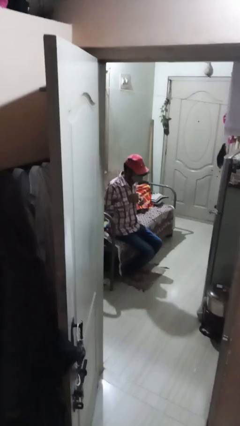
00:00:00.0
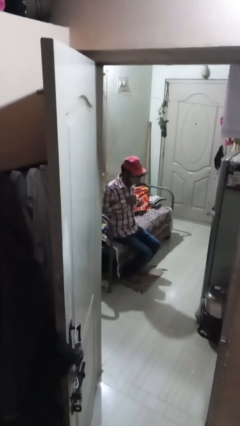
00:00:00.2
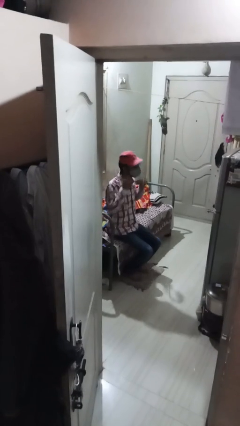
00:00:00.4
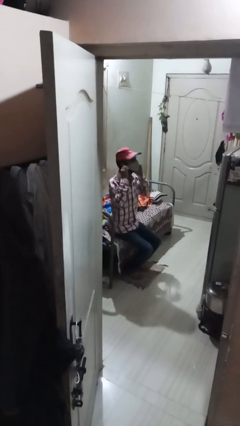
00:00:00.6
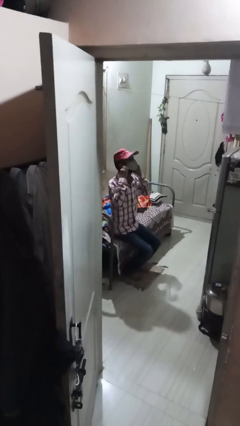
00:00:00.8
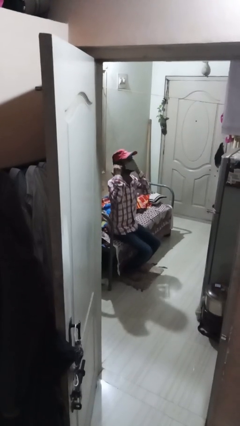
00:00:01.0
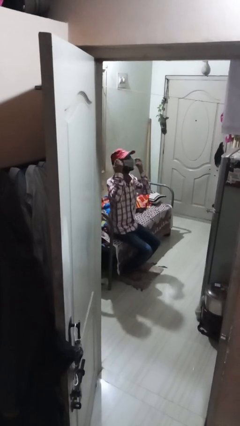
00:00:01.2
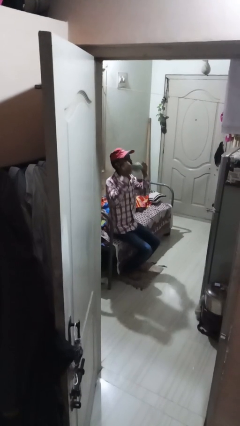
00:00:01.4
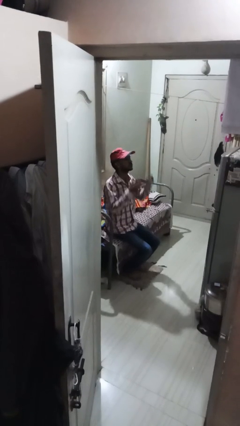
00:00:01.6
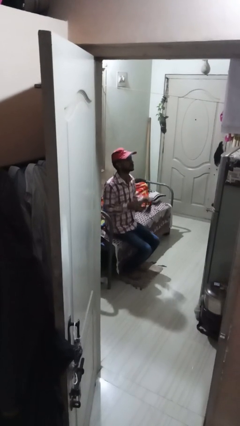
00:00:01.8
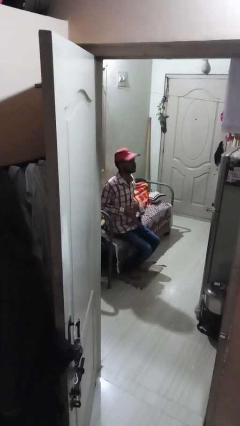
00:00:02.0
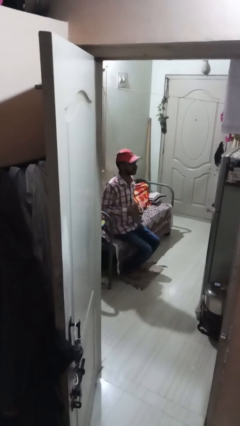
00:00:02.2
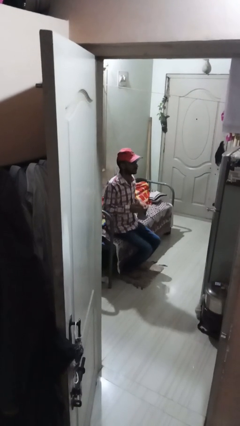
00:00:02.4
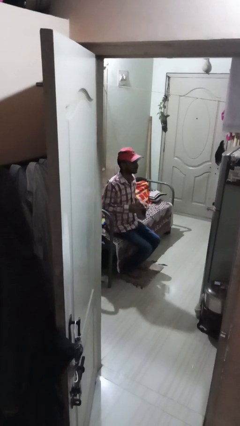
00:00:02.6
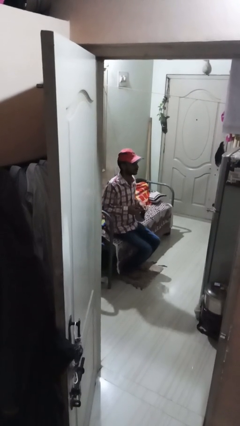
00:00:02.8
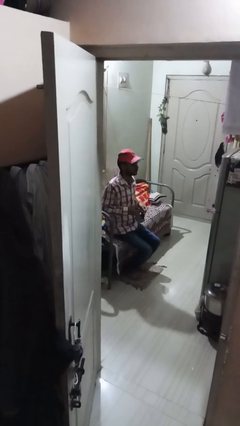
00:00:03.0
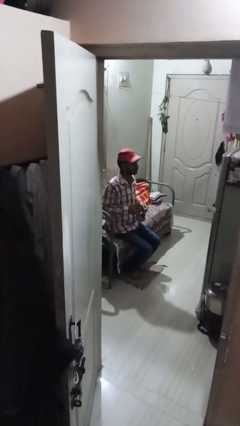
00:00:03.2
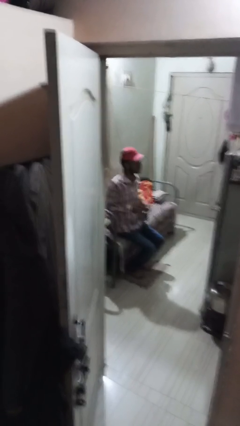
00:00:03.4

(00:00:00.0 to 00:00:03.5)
person takes off facemask

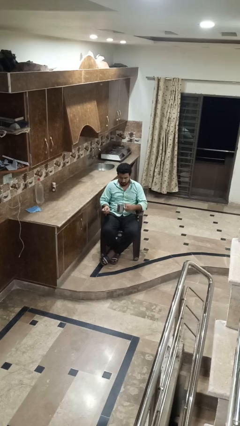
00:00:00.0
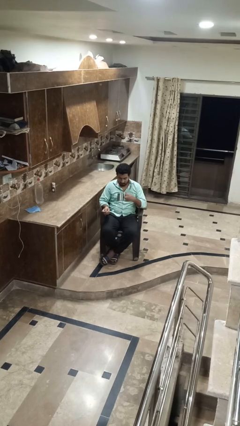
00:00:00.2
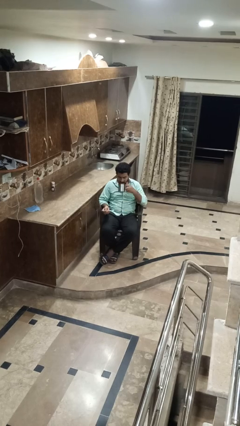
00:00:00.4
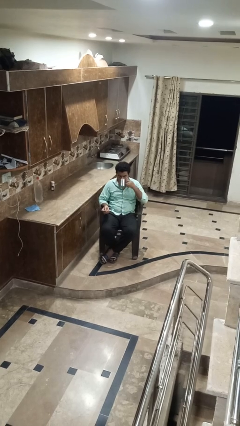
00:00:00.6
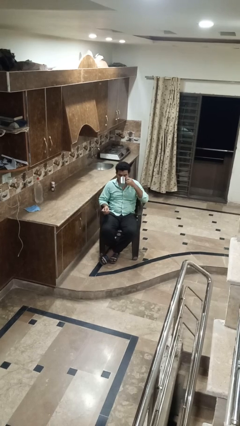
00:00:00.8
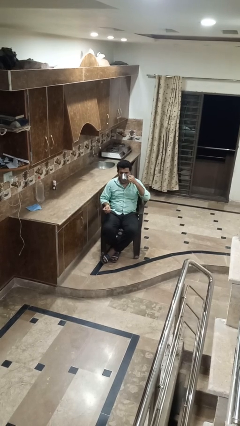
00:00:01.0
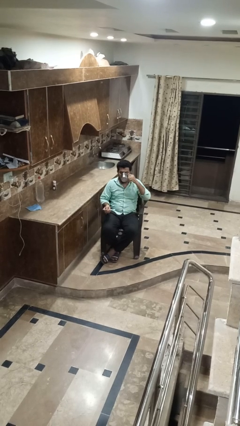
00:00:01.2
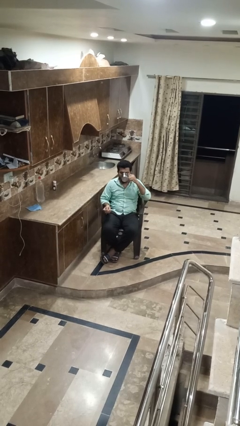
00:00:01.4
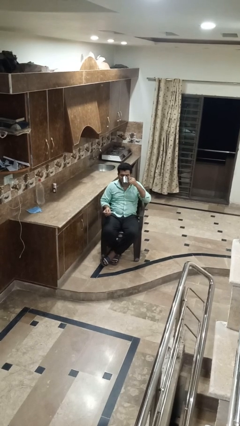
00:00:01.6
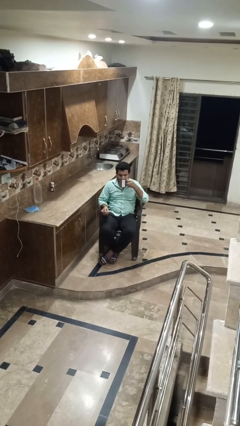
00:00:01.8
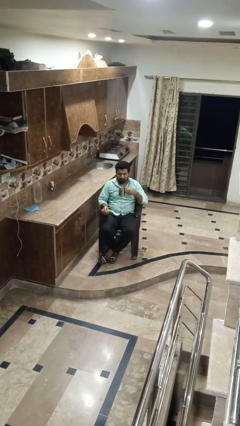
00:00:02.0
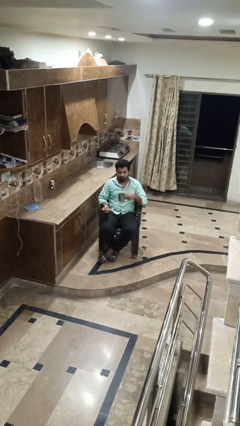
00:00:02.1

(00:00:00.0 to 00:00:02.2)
person drinks from mug

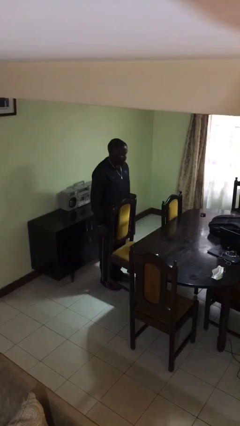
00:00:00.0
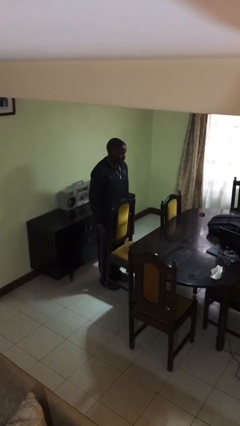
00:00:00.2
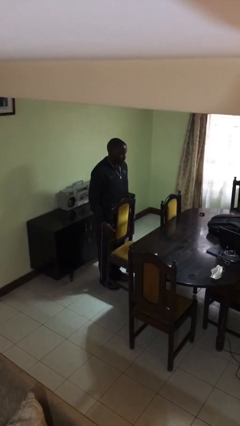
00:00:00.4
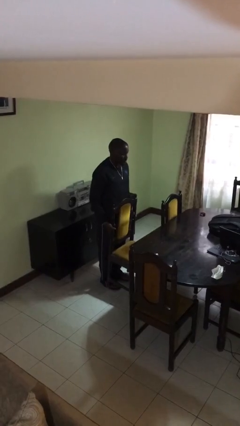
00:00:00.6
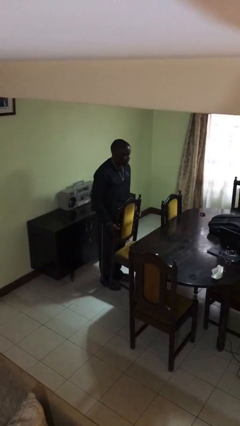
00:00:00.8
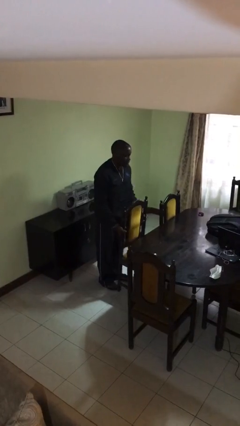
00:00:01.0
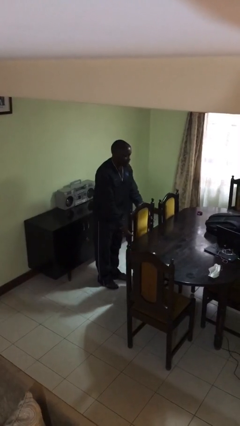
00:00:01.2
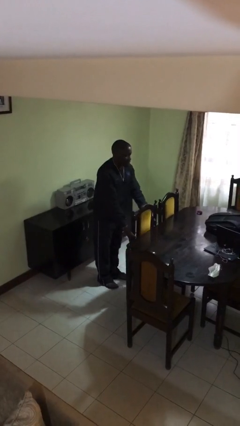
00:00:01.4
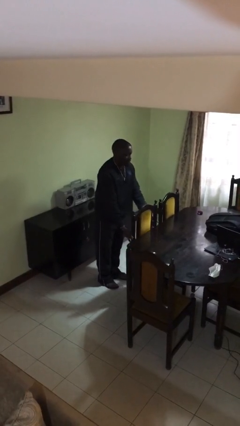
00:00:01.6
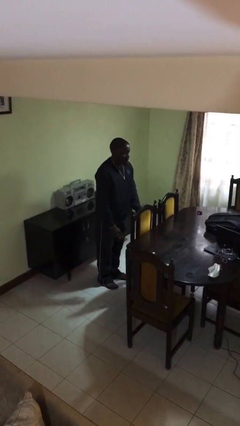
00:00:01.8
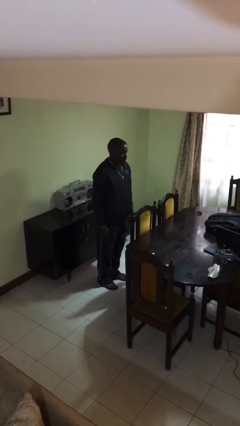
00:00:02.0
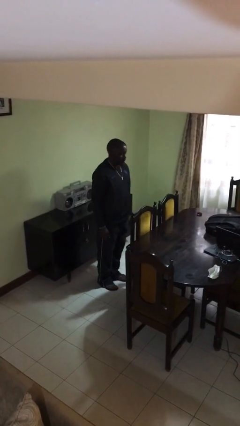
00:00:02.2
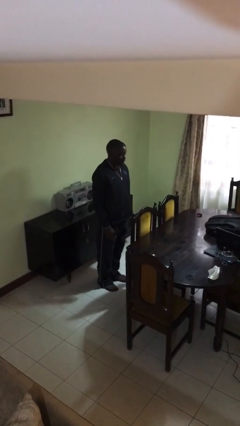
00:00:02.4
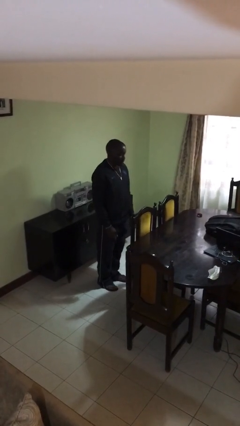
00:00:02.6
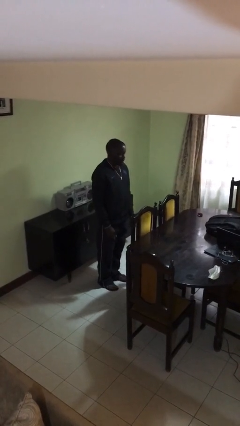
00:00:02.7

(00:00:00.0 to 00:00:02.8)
person pushes in chair

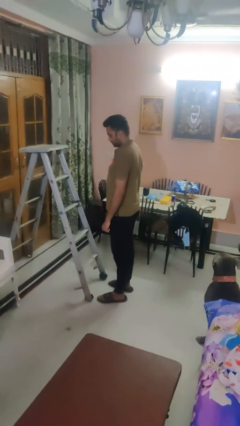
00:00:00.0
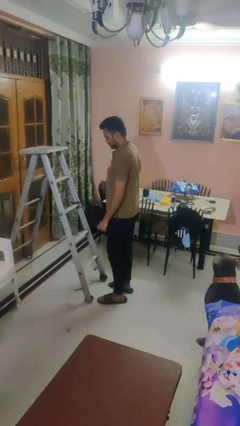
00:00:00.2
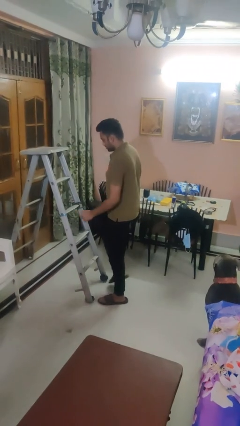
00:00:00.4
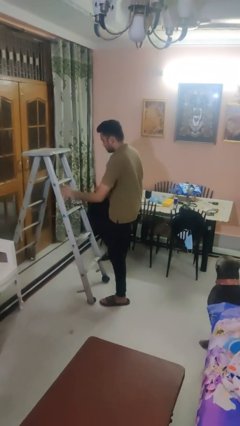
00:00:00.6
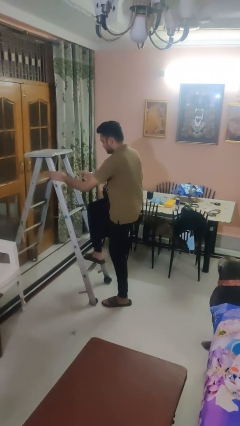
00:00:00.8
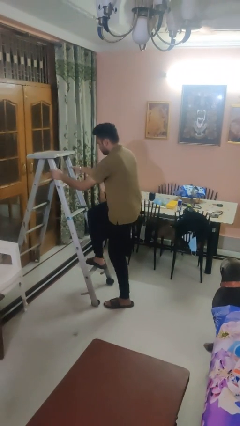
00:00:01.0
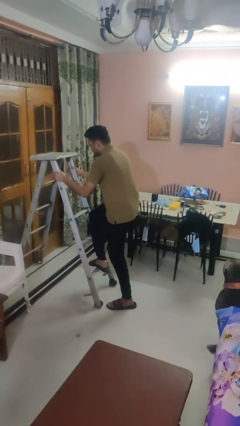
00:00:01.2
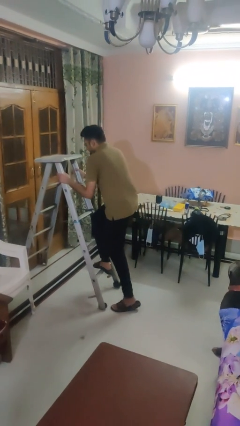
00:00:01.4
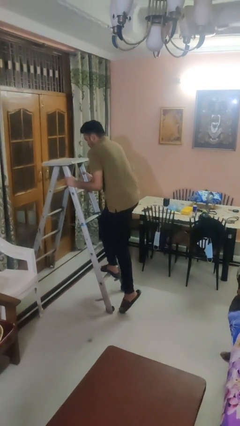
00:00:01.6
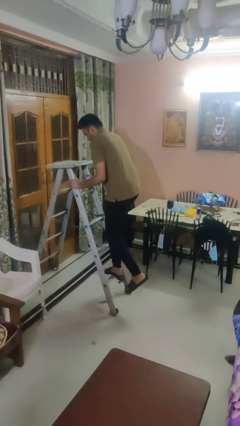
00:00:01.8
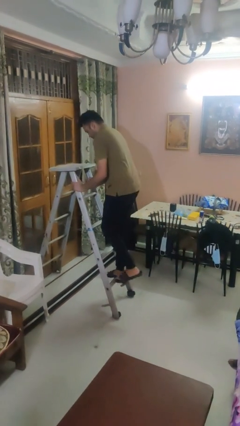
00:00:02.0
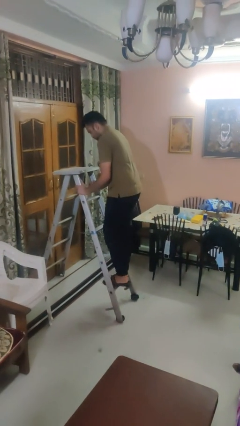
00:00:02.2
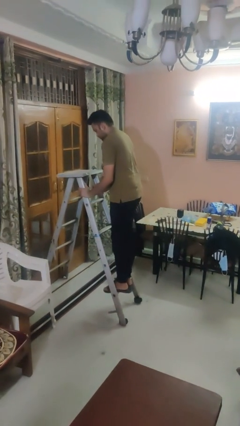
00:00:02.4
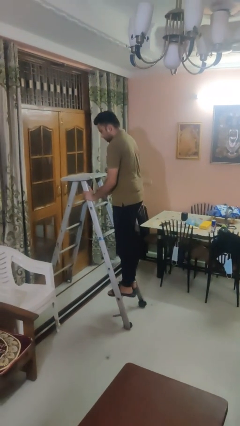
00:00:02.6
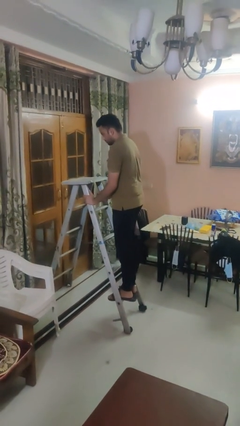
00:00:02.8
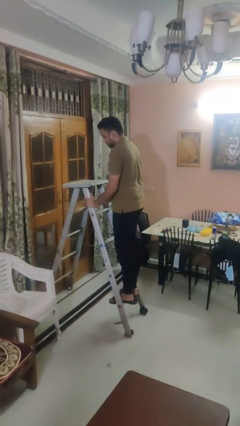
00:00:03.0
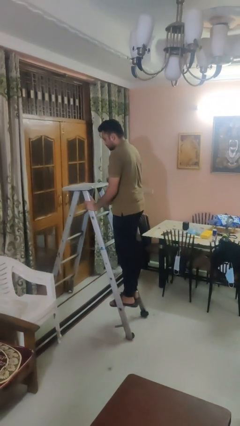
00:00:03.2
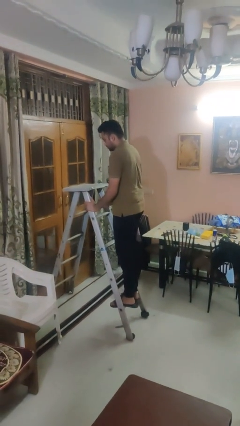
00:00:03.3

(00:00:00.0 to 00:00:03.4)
person climbs up ladder

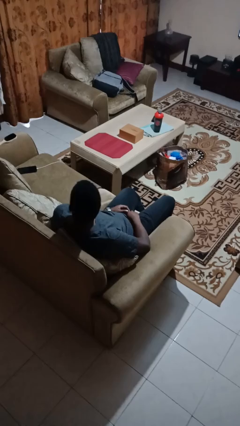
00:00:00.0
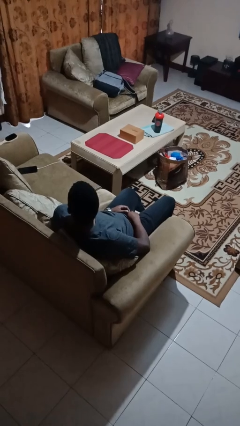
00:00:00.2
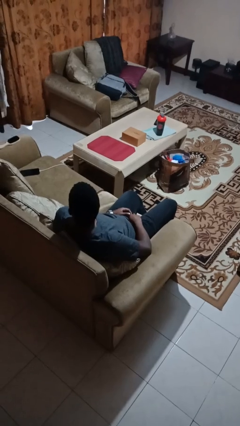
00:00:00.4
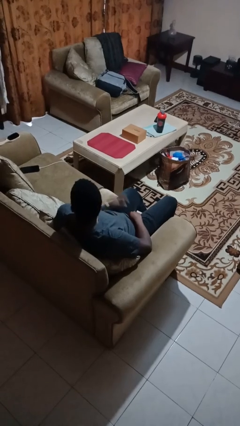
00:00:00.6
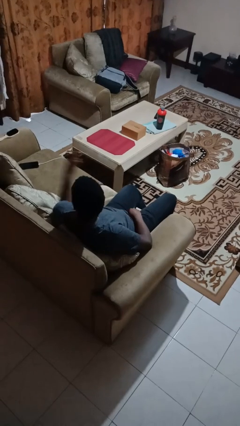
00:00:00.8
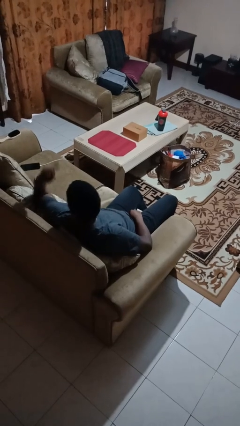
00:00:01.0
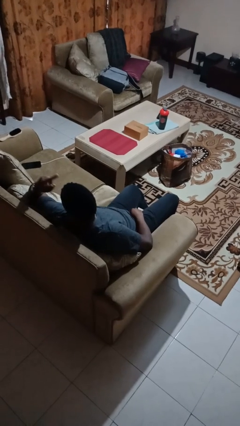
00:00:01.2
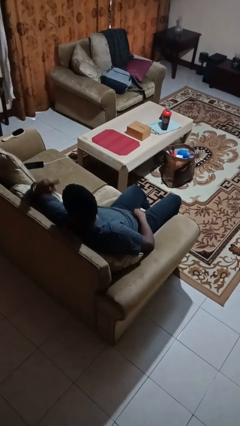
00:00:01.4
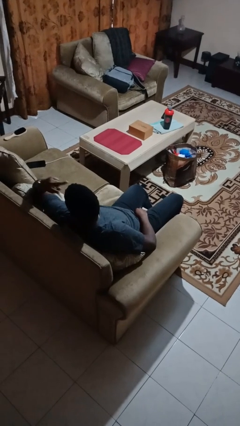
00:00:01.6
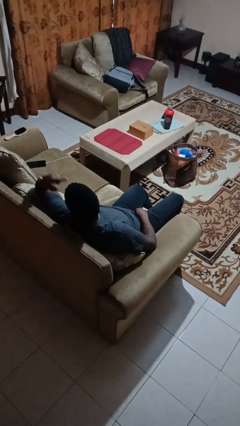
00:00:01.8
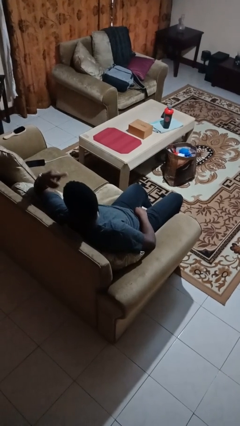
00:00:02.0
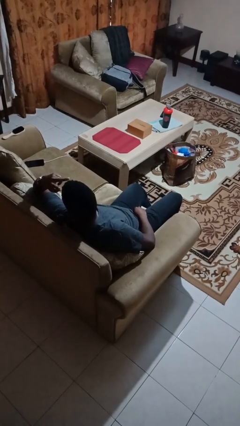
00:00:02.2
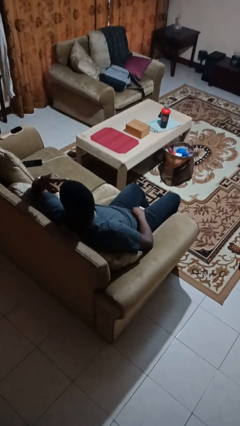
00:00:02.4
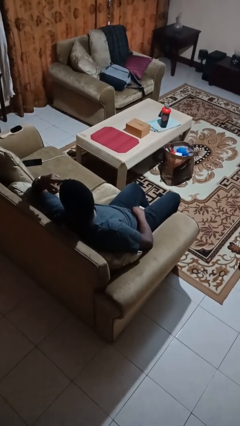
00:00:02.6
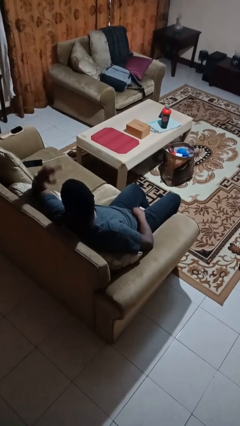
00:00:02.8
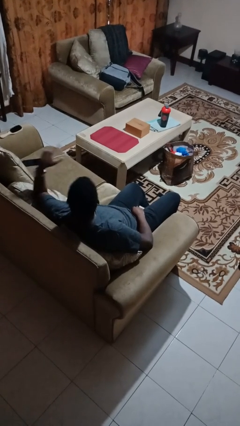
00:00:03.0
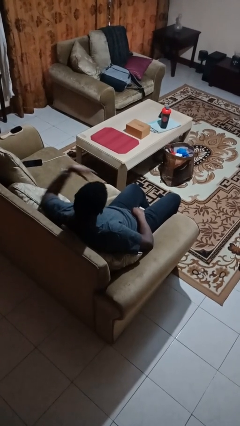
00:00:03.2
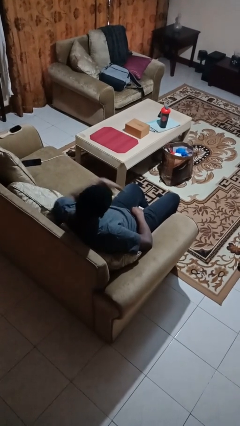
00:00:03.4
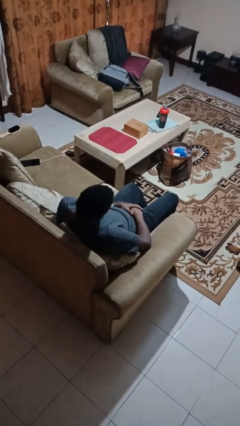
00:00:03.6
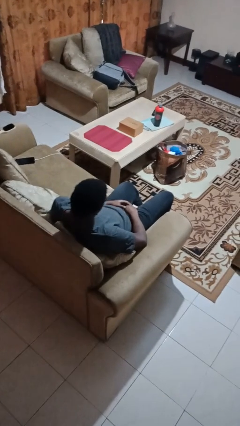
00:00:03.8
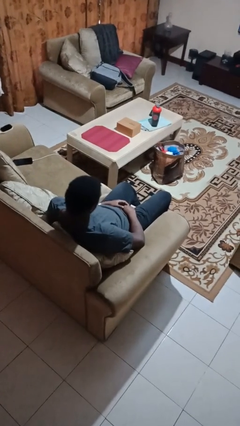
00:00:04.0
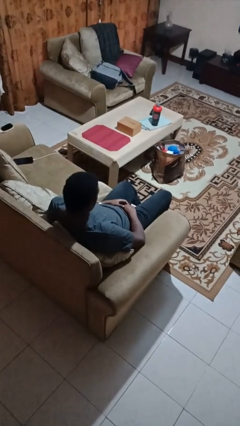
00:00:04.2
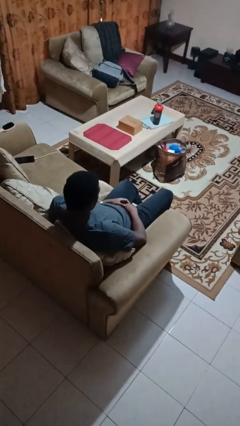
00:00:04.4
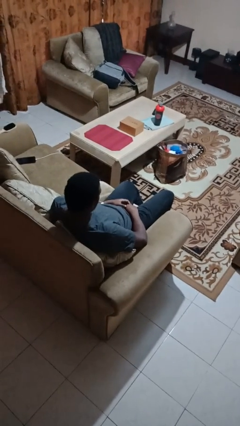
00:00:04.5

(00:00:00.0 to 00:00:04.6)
person gestures watch closely

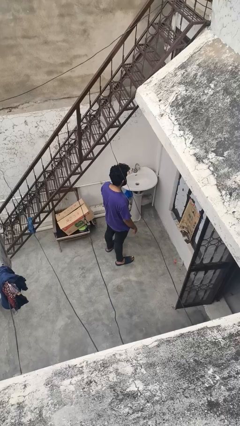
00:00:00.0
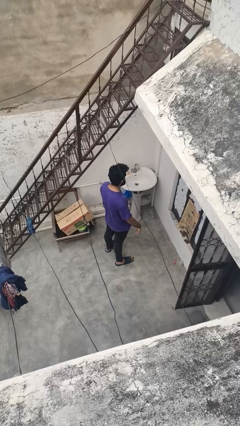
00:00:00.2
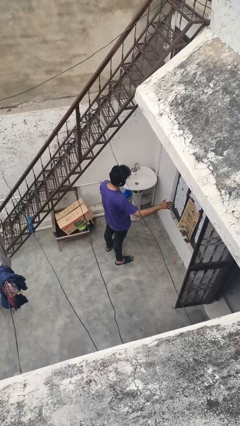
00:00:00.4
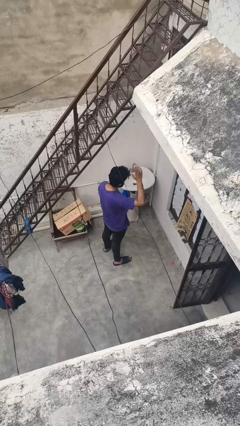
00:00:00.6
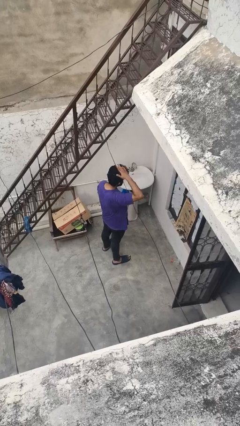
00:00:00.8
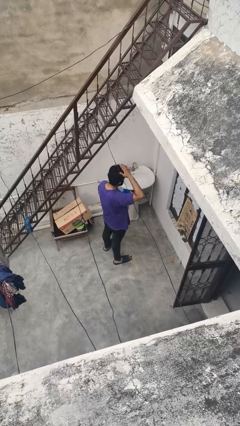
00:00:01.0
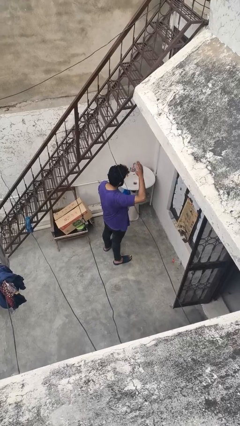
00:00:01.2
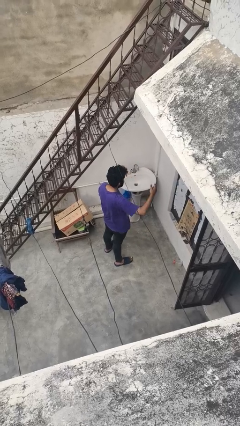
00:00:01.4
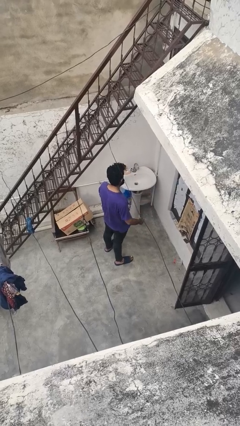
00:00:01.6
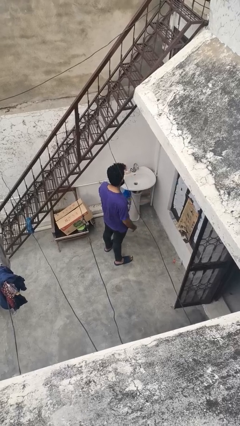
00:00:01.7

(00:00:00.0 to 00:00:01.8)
person pats head
